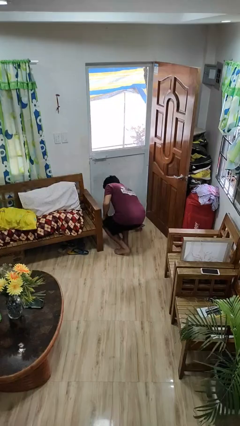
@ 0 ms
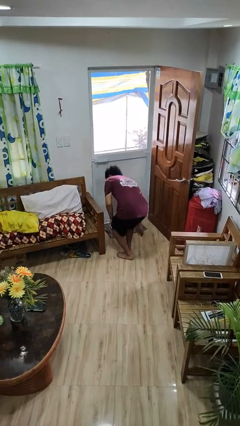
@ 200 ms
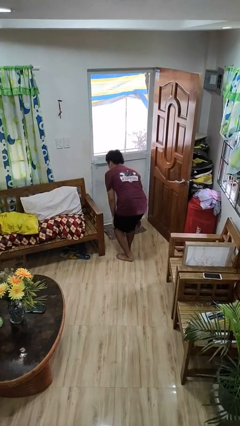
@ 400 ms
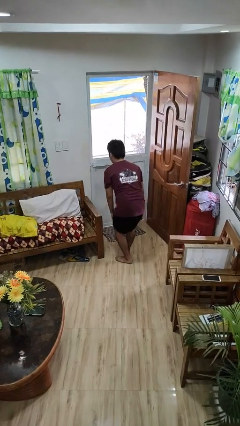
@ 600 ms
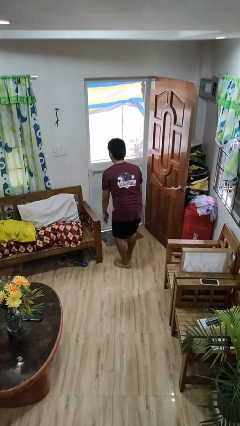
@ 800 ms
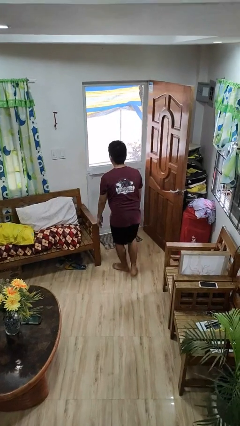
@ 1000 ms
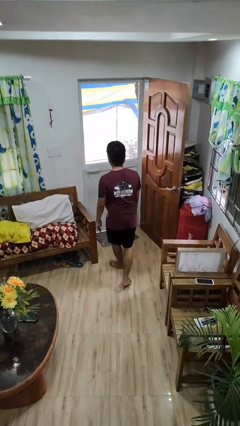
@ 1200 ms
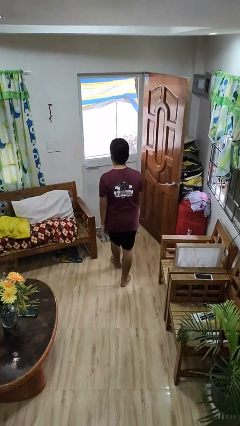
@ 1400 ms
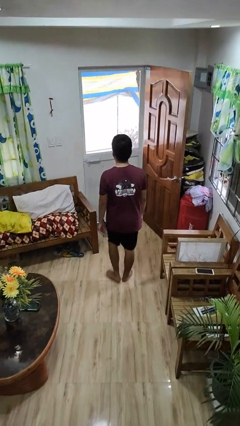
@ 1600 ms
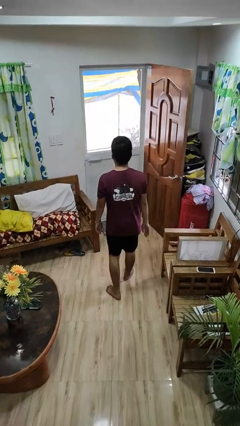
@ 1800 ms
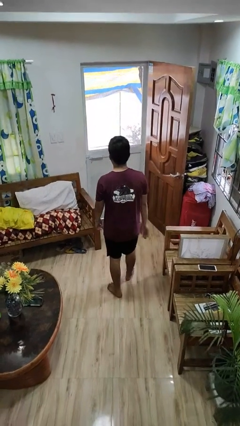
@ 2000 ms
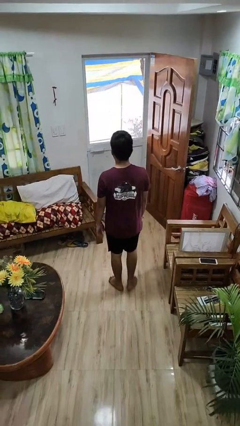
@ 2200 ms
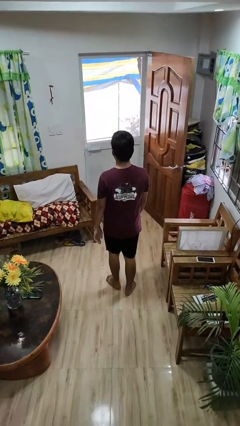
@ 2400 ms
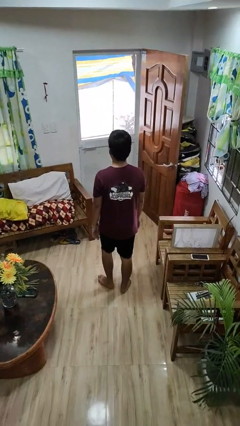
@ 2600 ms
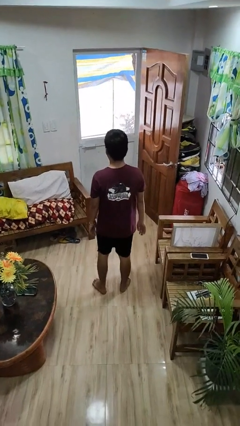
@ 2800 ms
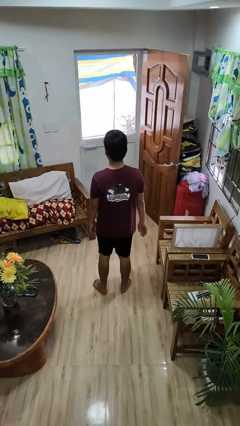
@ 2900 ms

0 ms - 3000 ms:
person stands up from floor

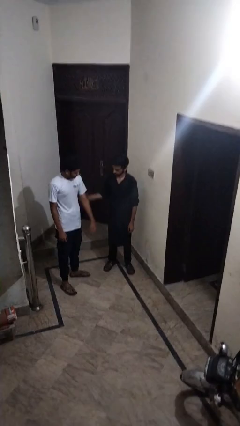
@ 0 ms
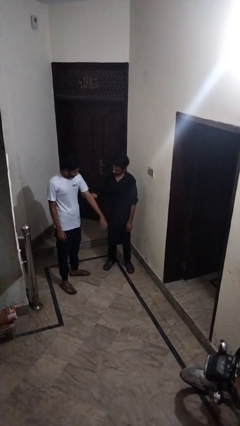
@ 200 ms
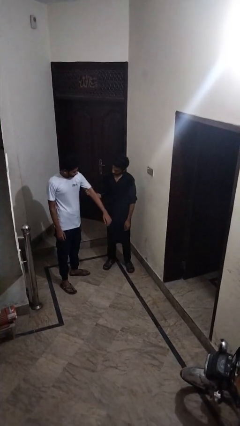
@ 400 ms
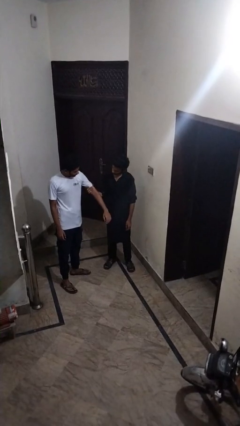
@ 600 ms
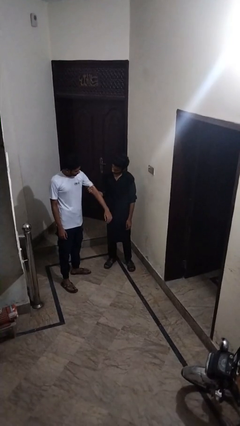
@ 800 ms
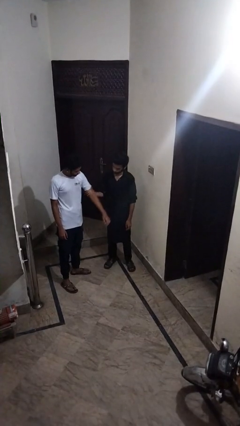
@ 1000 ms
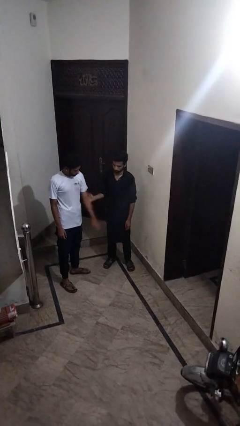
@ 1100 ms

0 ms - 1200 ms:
person grabs person by bicep

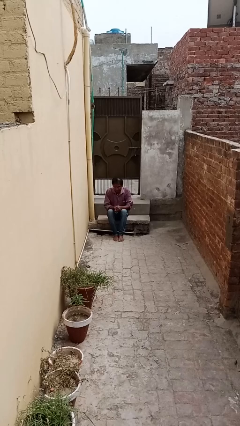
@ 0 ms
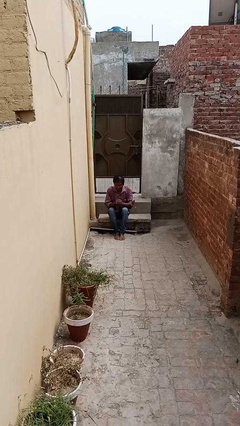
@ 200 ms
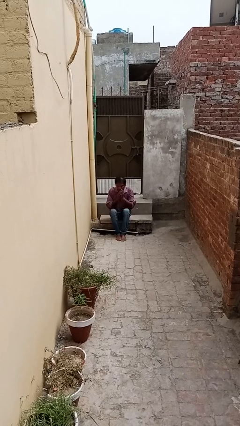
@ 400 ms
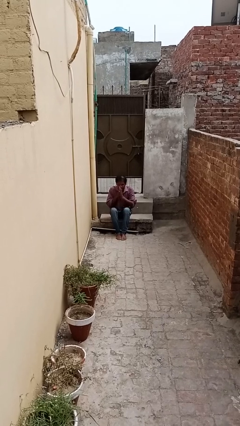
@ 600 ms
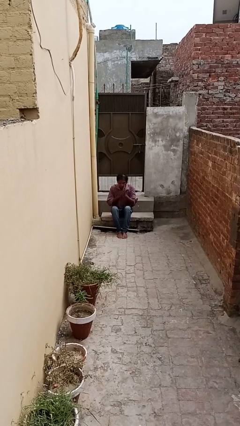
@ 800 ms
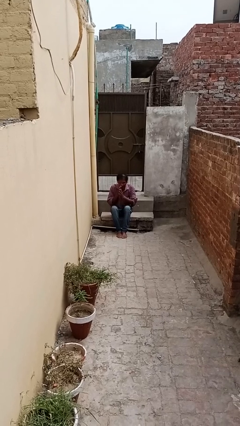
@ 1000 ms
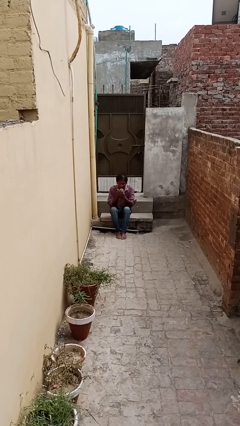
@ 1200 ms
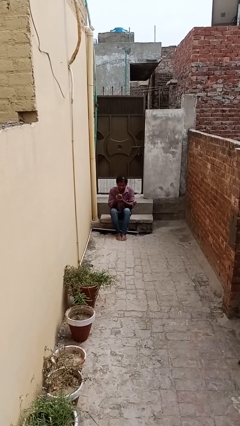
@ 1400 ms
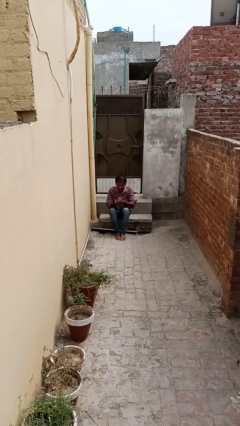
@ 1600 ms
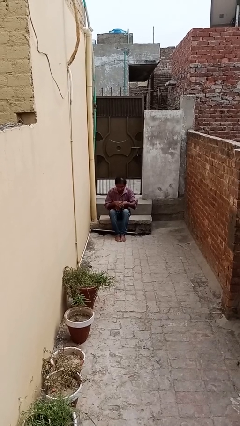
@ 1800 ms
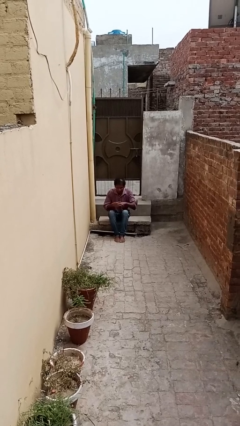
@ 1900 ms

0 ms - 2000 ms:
person blows into hands

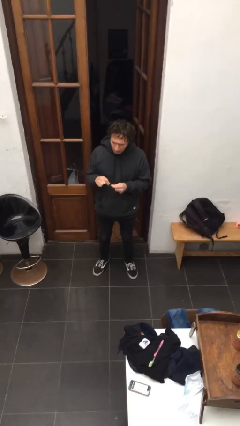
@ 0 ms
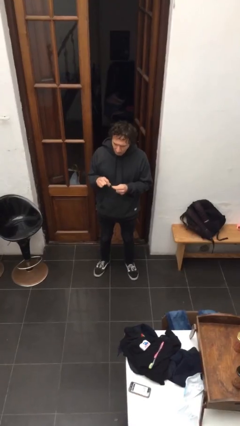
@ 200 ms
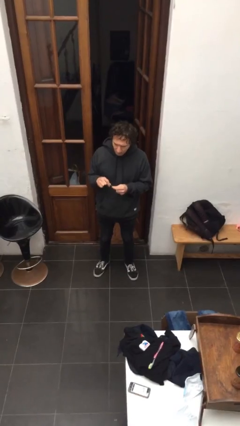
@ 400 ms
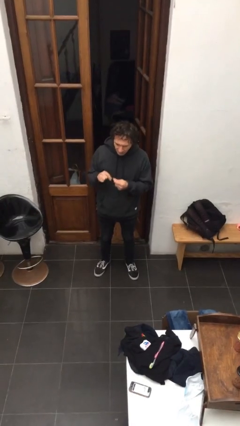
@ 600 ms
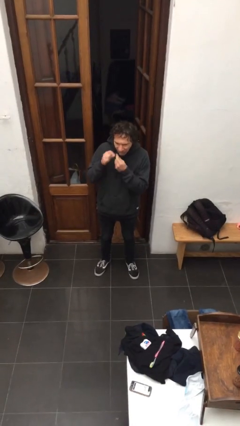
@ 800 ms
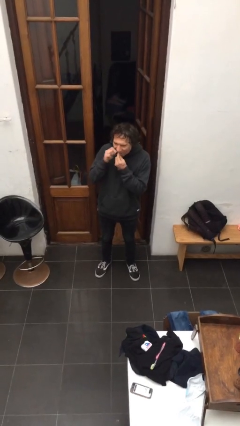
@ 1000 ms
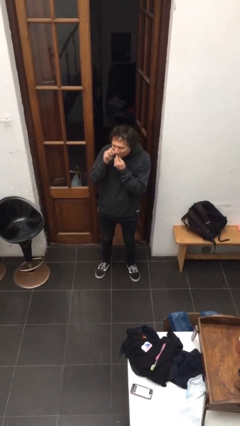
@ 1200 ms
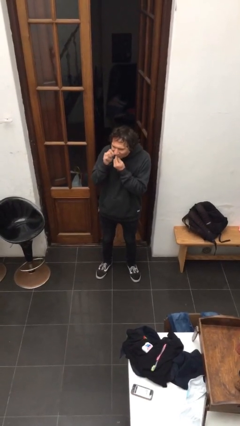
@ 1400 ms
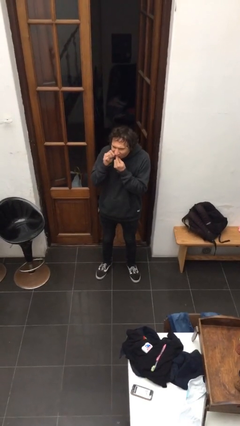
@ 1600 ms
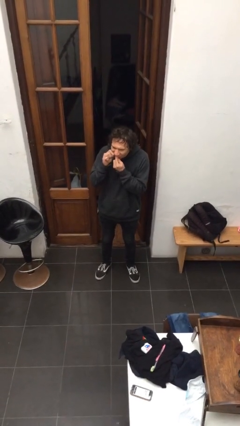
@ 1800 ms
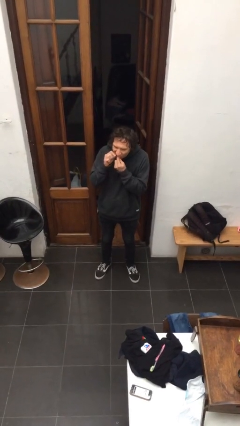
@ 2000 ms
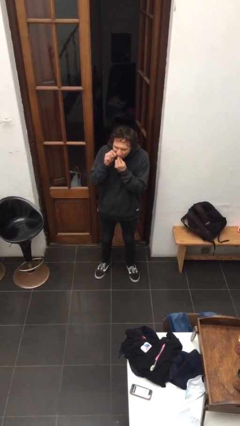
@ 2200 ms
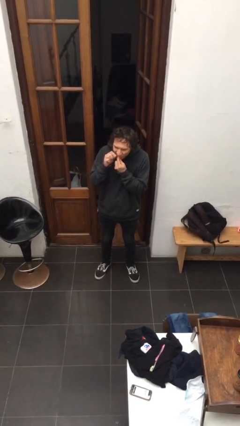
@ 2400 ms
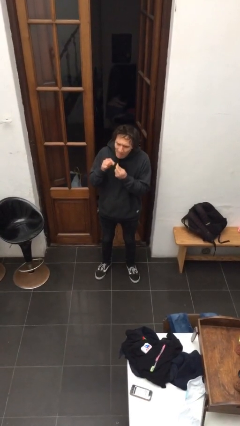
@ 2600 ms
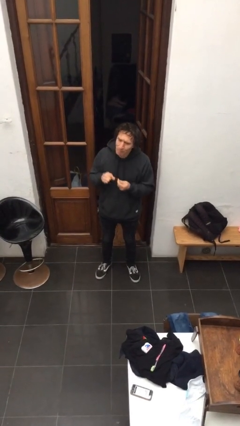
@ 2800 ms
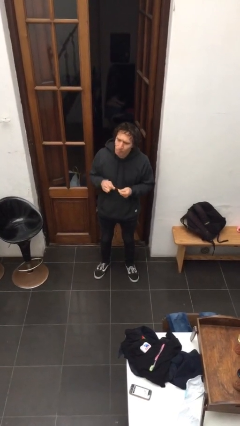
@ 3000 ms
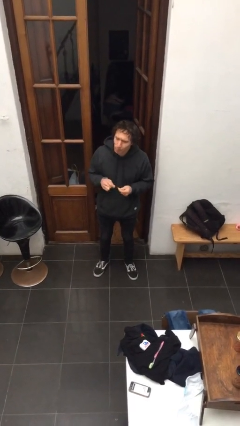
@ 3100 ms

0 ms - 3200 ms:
person flosses

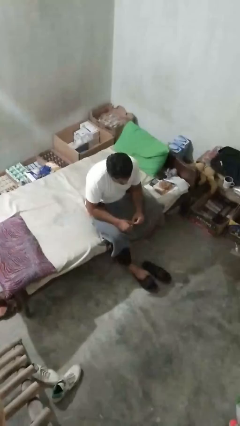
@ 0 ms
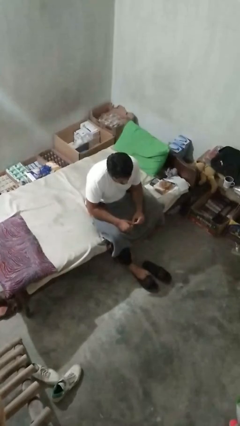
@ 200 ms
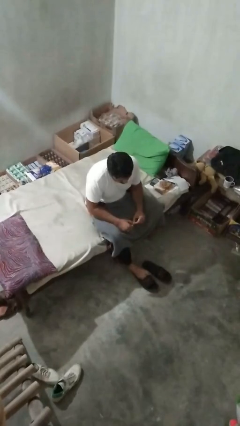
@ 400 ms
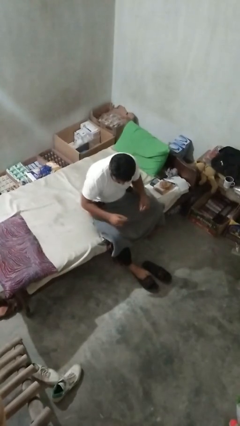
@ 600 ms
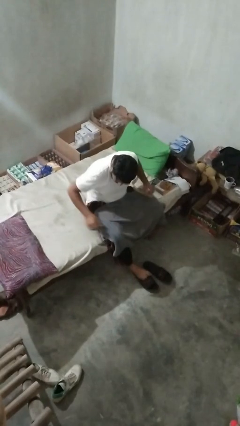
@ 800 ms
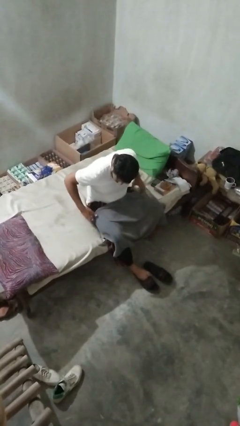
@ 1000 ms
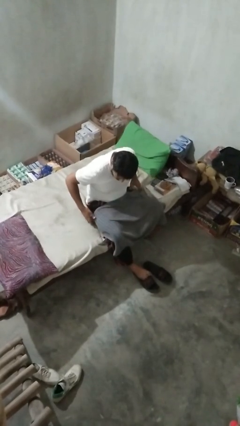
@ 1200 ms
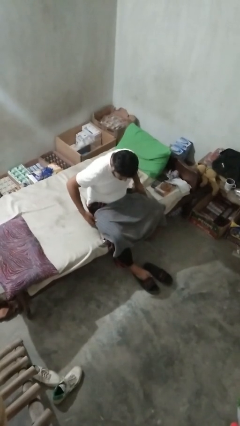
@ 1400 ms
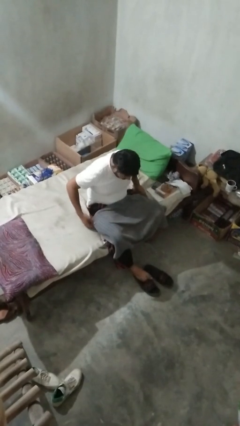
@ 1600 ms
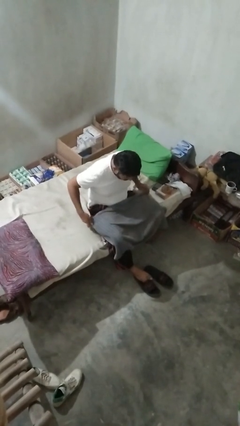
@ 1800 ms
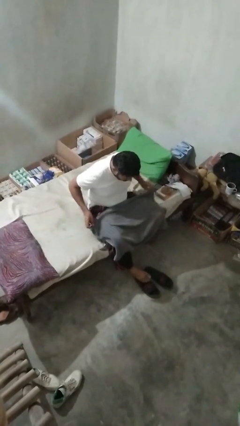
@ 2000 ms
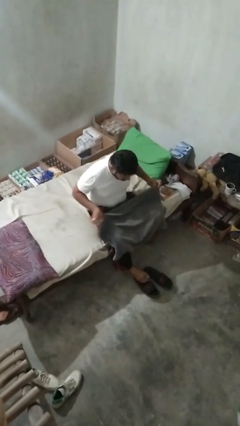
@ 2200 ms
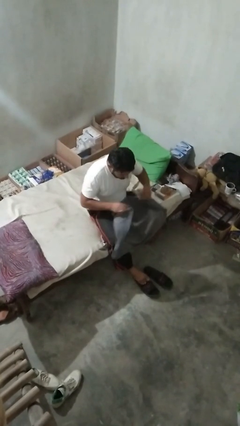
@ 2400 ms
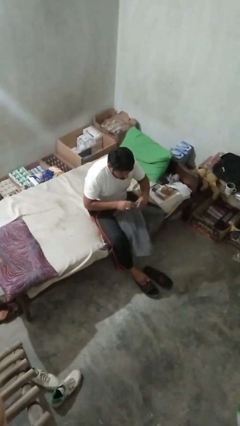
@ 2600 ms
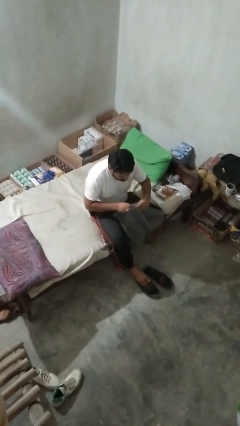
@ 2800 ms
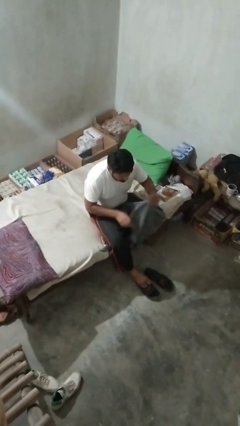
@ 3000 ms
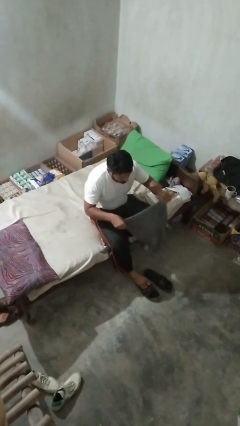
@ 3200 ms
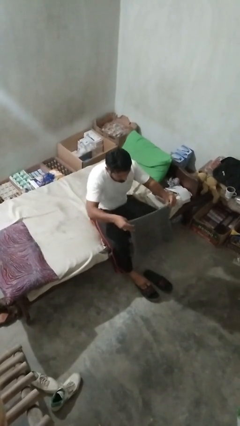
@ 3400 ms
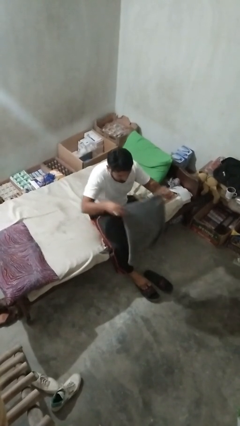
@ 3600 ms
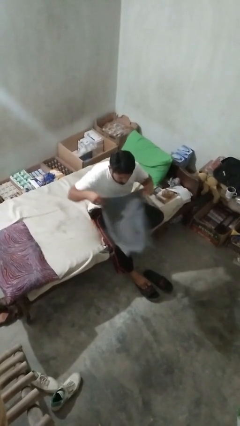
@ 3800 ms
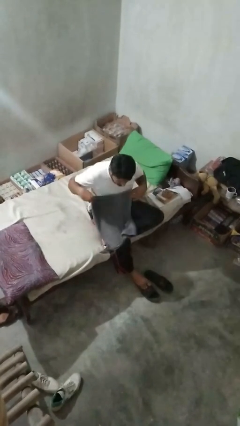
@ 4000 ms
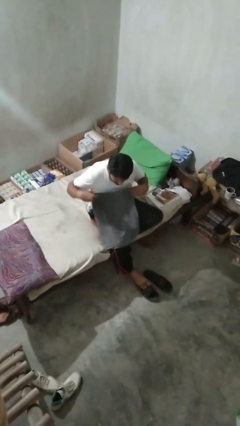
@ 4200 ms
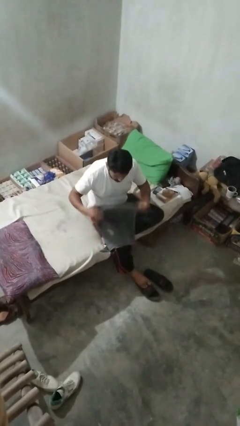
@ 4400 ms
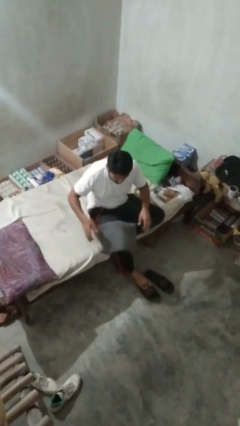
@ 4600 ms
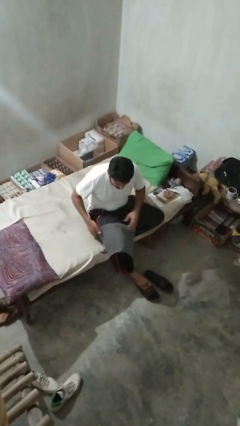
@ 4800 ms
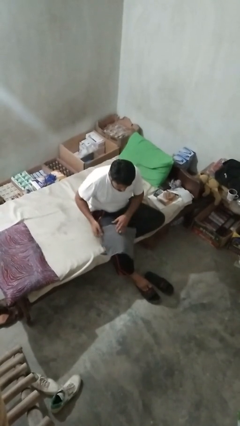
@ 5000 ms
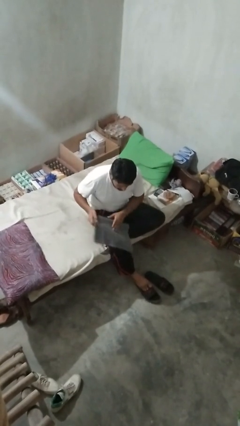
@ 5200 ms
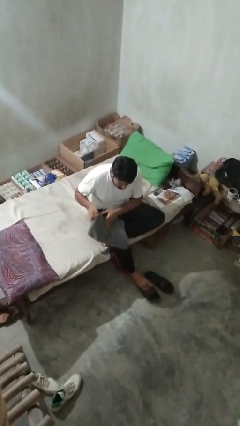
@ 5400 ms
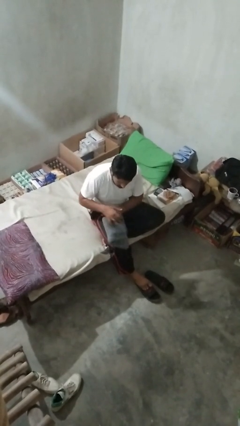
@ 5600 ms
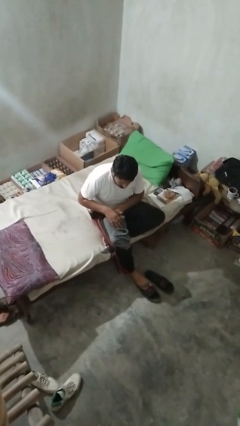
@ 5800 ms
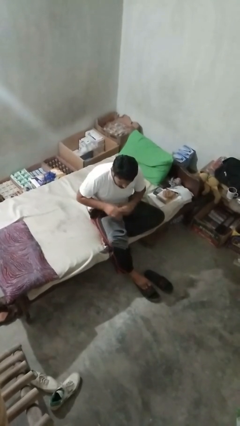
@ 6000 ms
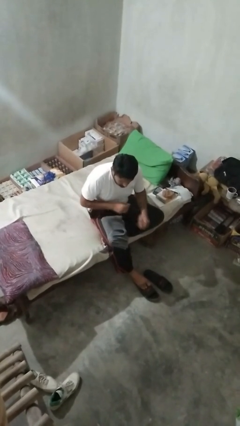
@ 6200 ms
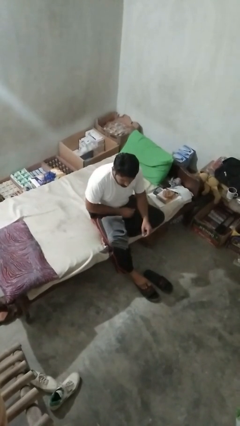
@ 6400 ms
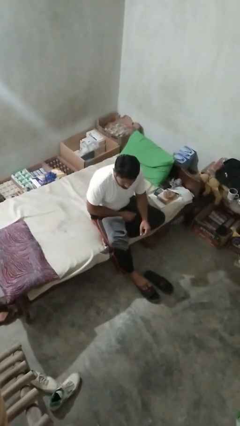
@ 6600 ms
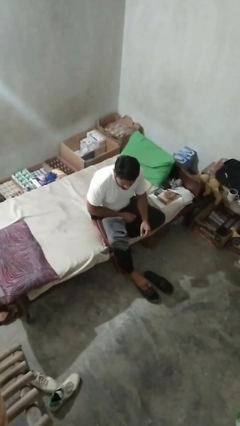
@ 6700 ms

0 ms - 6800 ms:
person folds towel

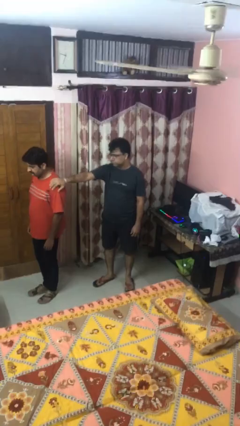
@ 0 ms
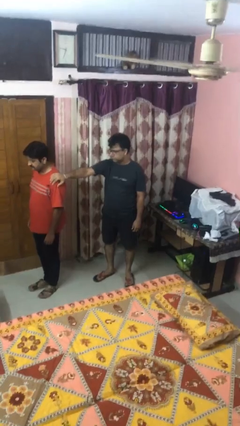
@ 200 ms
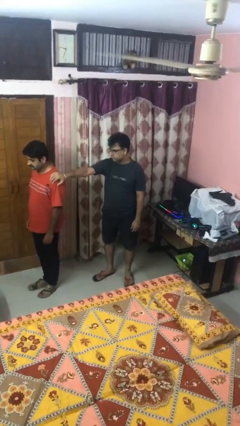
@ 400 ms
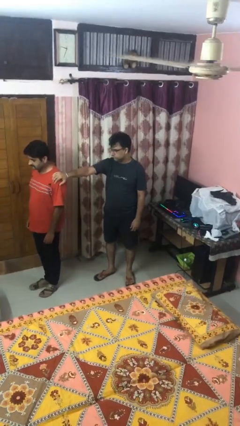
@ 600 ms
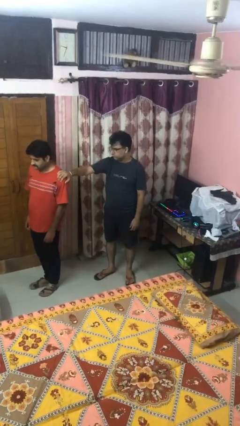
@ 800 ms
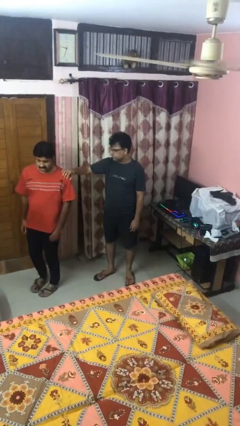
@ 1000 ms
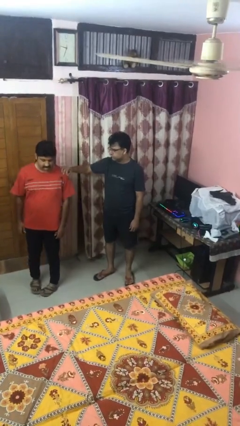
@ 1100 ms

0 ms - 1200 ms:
person grabs person by shoulder
